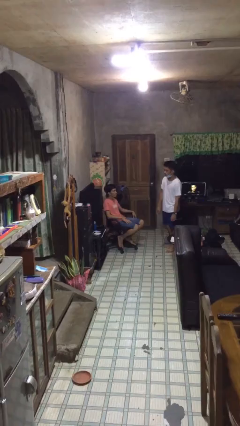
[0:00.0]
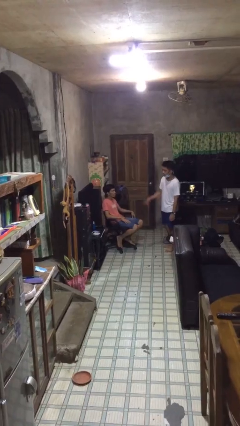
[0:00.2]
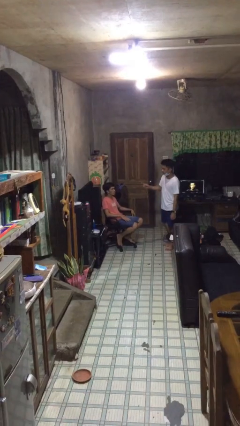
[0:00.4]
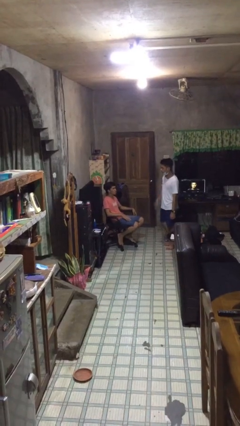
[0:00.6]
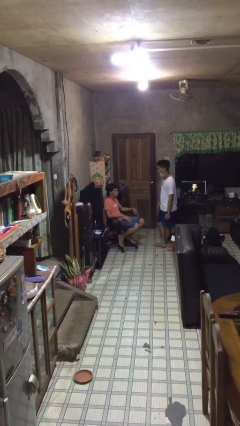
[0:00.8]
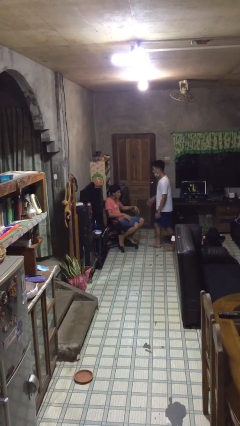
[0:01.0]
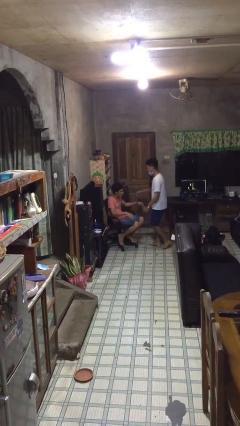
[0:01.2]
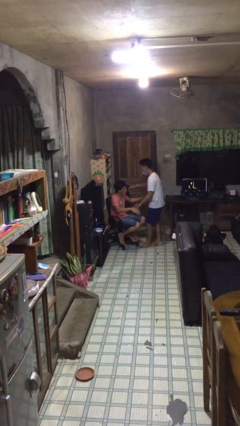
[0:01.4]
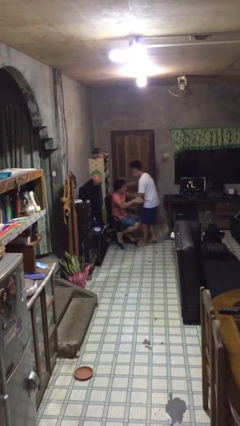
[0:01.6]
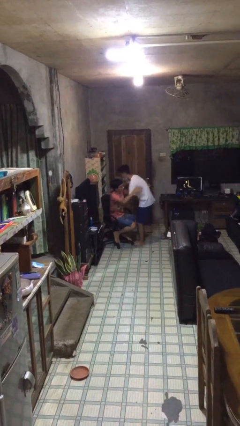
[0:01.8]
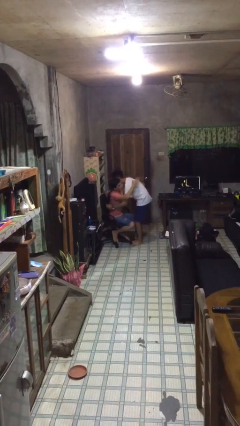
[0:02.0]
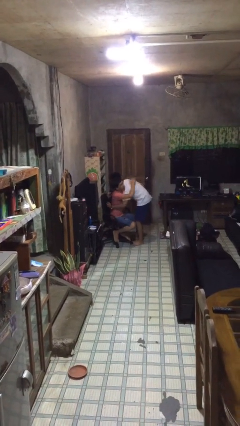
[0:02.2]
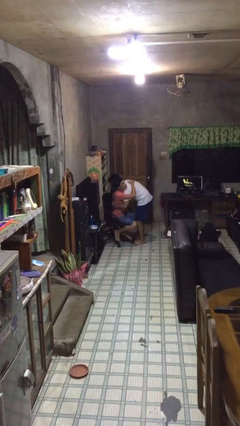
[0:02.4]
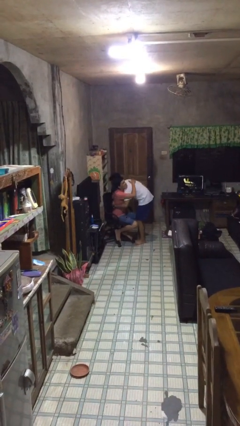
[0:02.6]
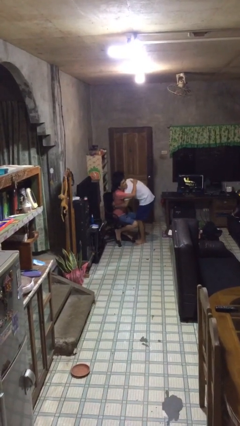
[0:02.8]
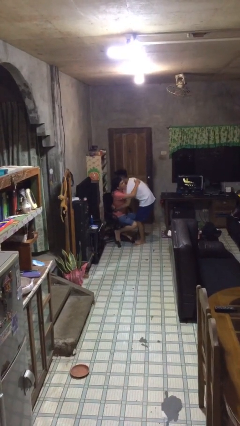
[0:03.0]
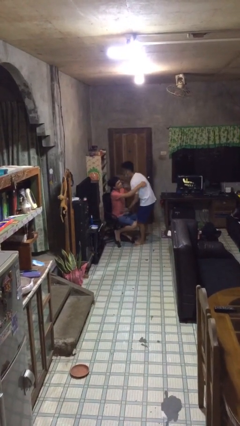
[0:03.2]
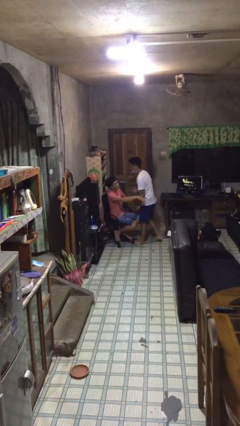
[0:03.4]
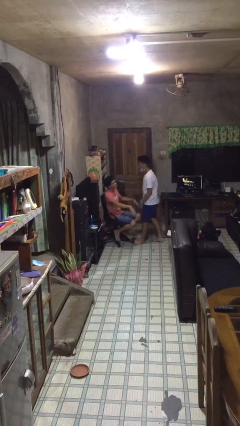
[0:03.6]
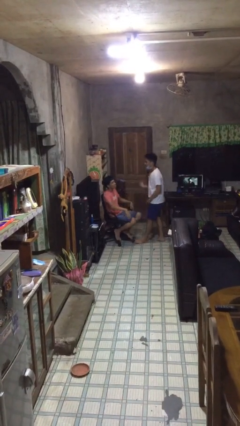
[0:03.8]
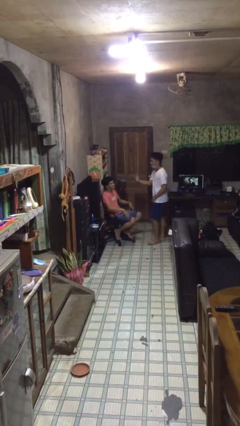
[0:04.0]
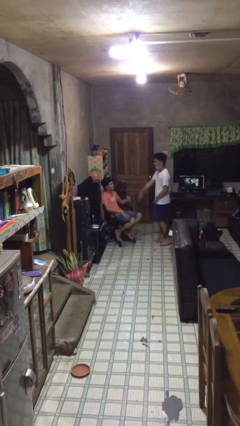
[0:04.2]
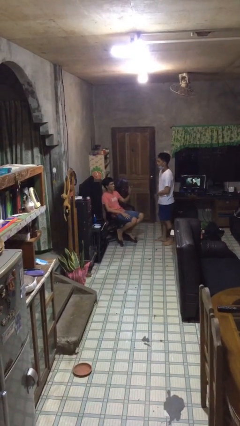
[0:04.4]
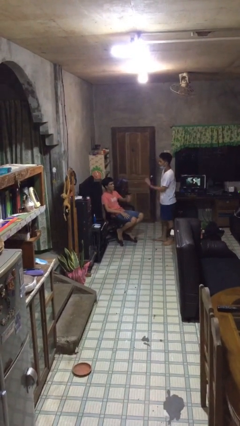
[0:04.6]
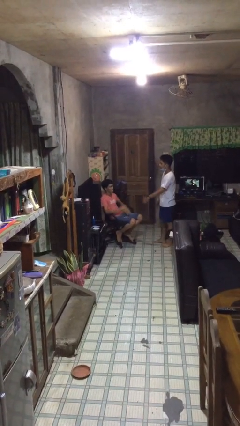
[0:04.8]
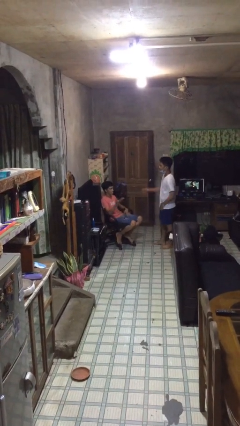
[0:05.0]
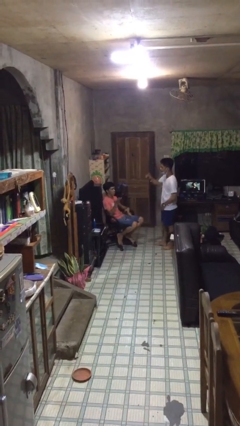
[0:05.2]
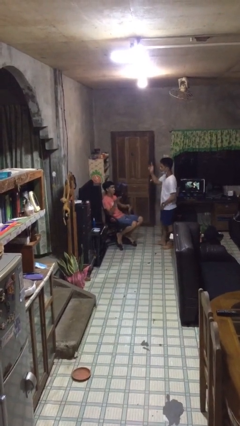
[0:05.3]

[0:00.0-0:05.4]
person embraces person

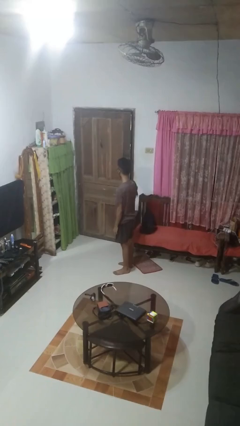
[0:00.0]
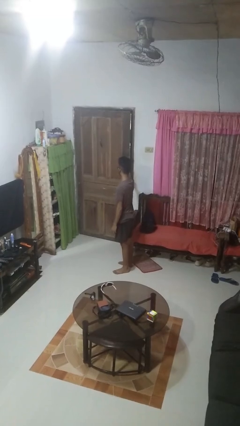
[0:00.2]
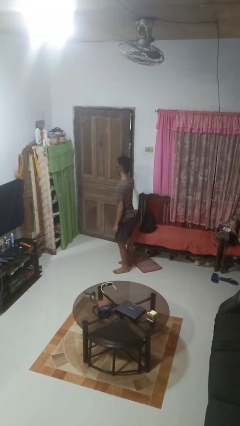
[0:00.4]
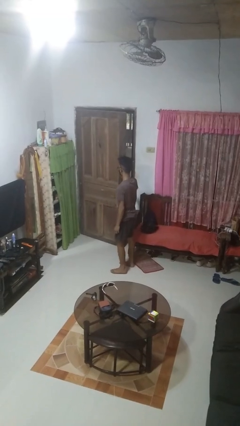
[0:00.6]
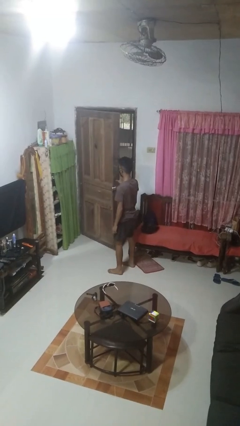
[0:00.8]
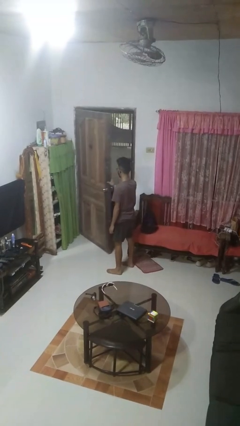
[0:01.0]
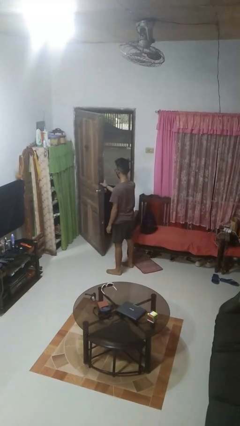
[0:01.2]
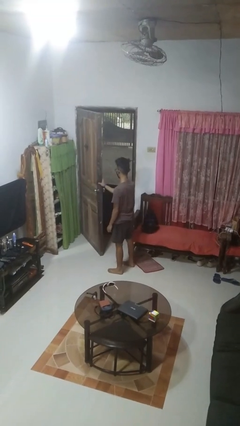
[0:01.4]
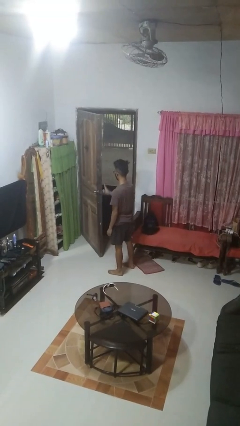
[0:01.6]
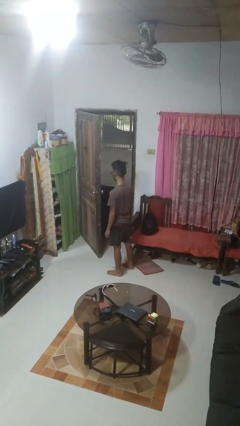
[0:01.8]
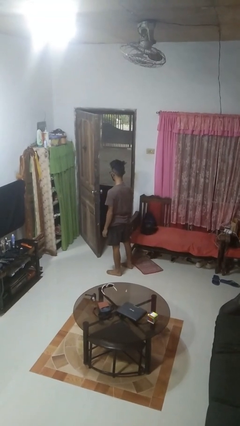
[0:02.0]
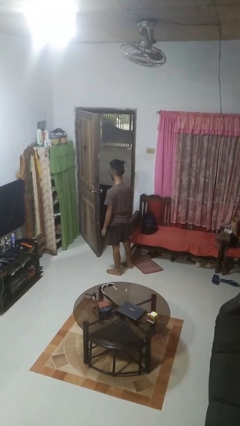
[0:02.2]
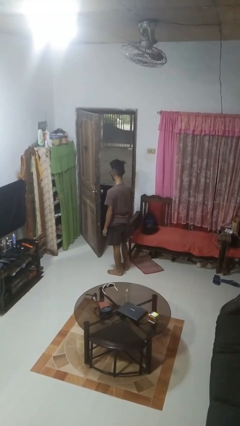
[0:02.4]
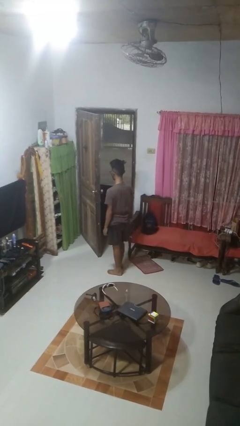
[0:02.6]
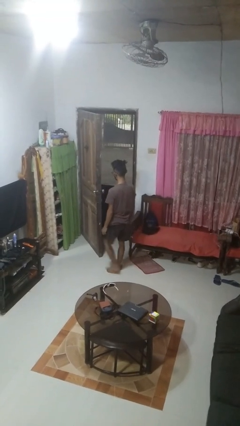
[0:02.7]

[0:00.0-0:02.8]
person opens facility door

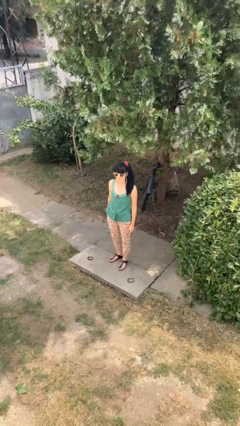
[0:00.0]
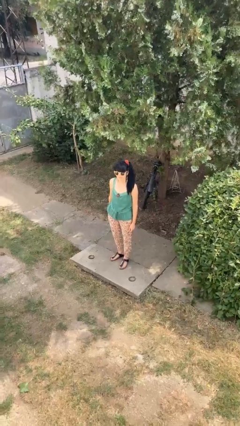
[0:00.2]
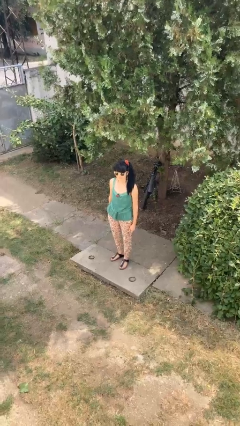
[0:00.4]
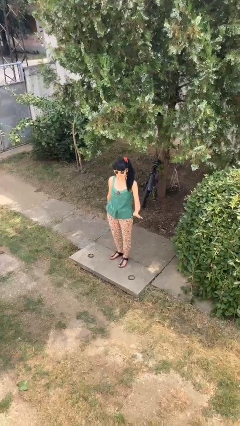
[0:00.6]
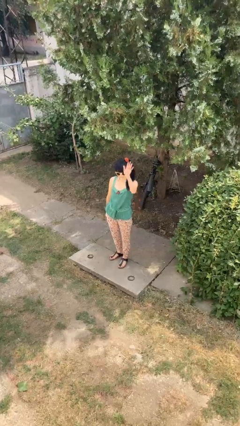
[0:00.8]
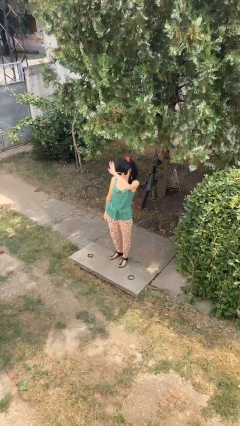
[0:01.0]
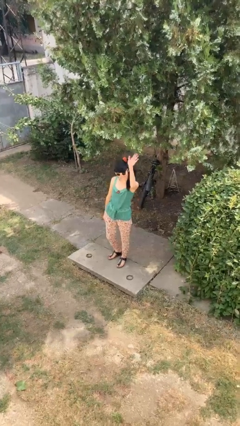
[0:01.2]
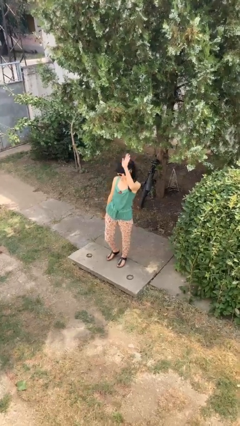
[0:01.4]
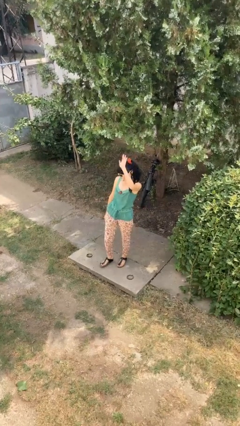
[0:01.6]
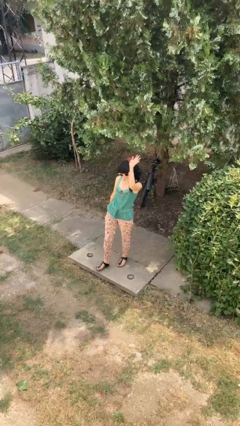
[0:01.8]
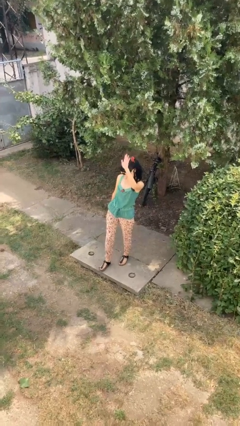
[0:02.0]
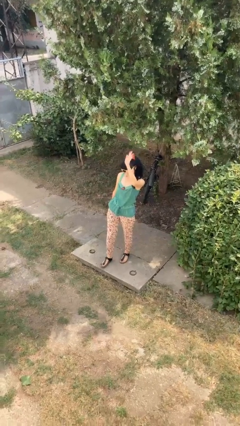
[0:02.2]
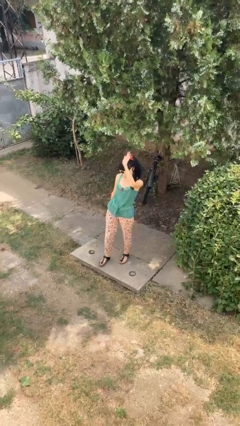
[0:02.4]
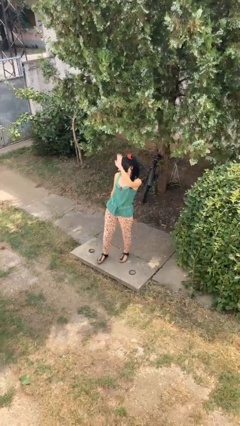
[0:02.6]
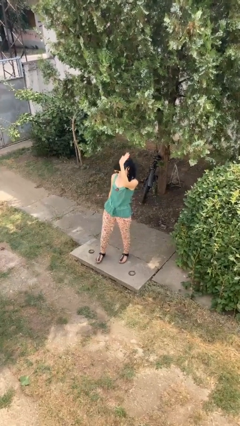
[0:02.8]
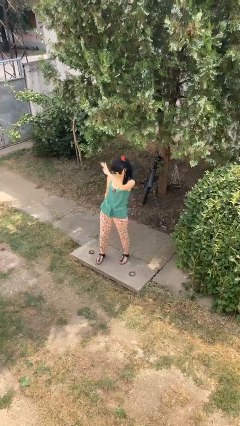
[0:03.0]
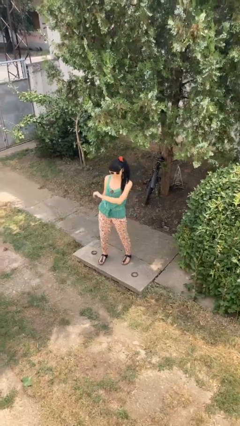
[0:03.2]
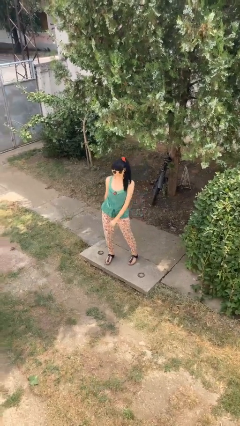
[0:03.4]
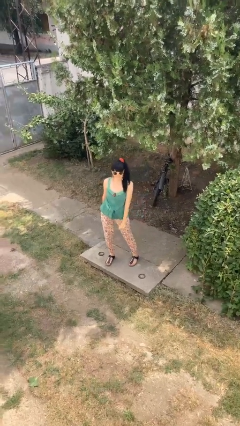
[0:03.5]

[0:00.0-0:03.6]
person waves at person

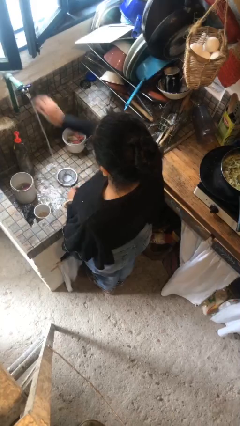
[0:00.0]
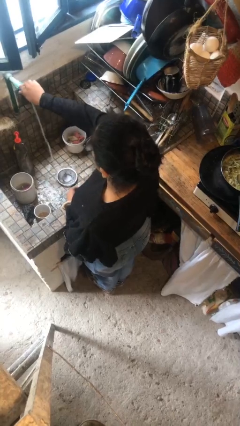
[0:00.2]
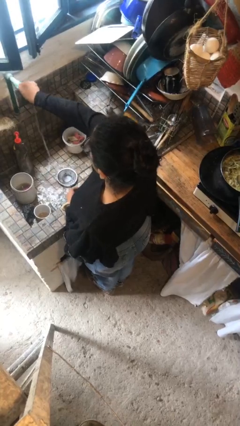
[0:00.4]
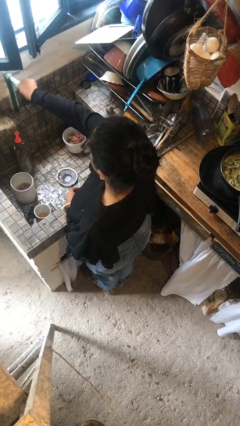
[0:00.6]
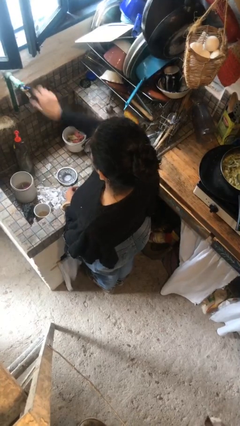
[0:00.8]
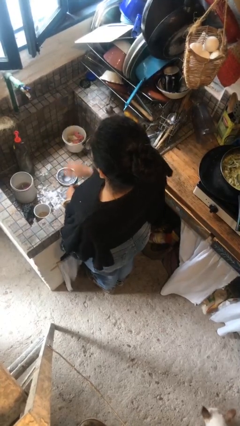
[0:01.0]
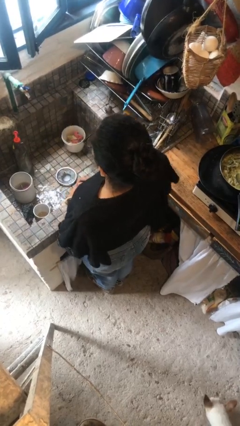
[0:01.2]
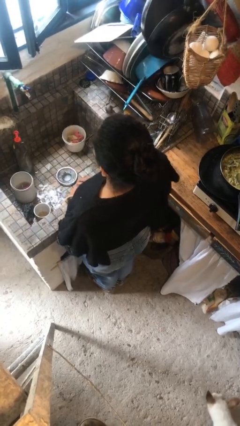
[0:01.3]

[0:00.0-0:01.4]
person turns off faucet

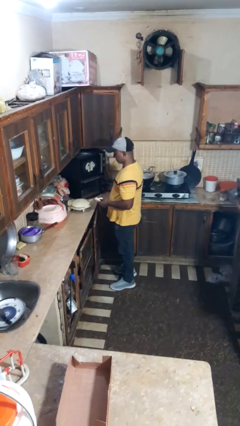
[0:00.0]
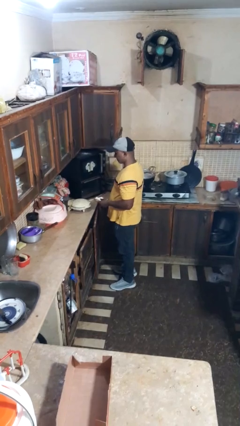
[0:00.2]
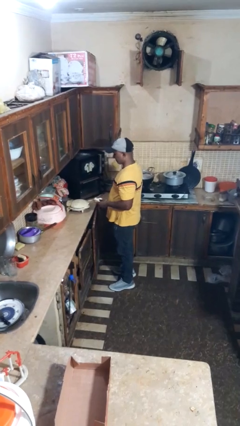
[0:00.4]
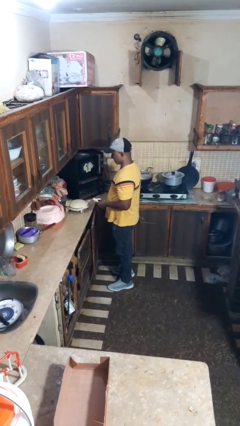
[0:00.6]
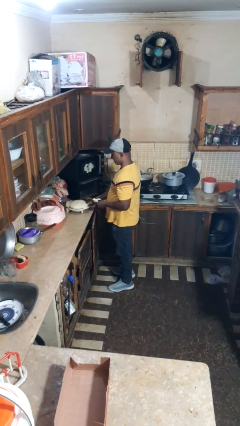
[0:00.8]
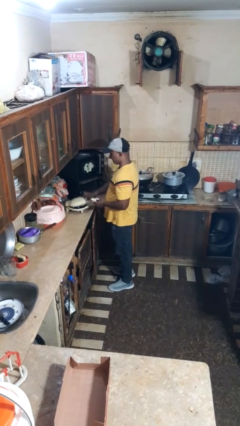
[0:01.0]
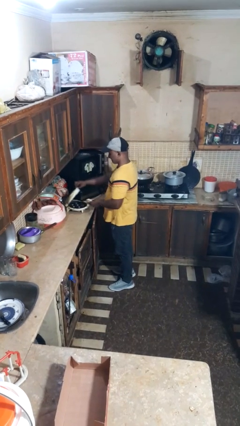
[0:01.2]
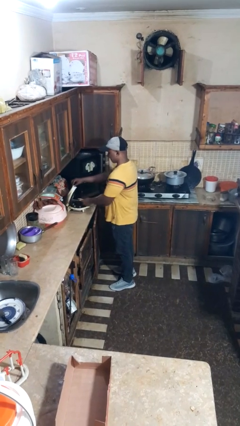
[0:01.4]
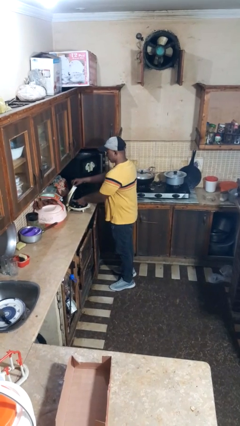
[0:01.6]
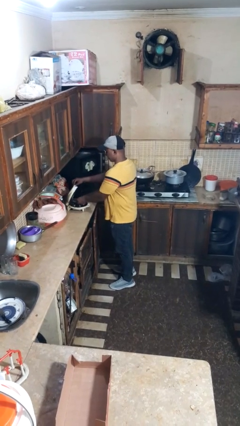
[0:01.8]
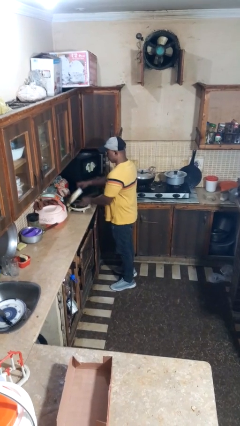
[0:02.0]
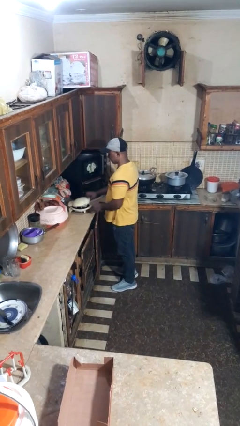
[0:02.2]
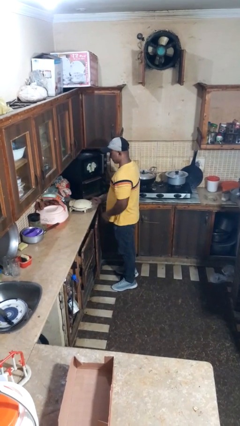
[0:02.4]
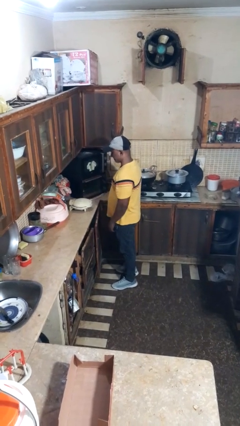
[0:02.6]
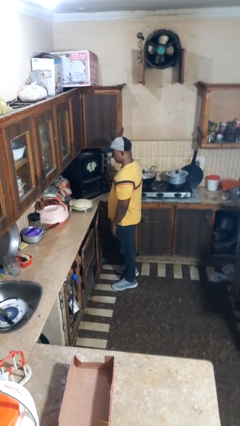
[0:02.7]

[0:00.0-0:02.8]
person puts object into toaster

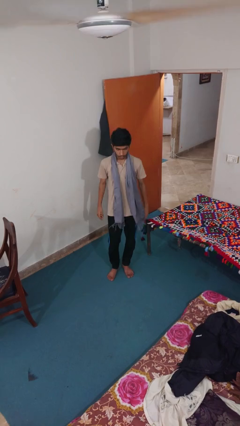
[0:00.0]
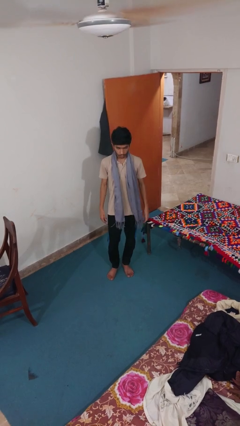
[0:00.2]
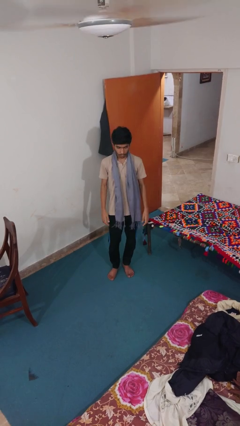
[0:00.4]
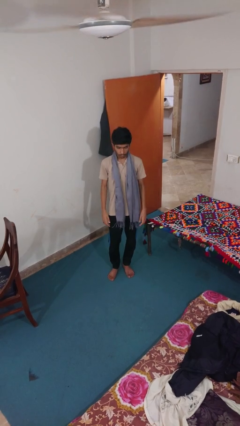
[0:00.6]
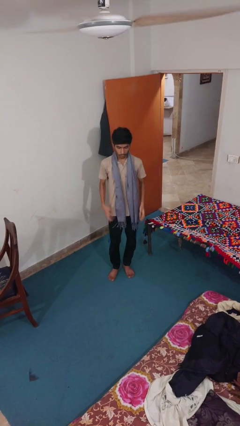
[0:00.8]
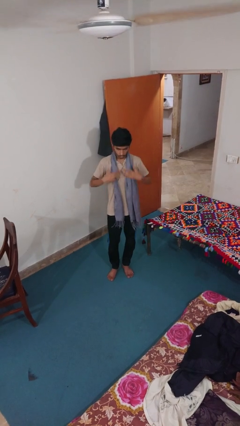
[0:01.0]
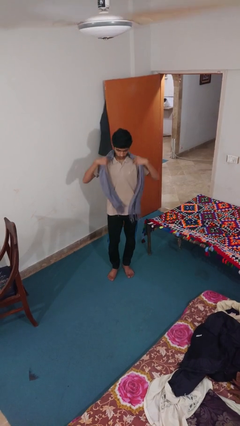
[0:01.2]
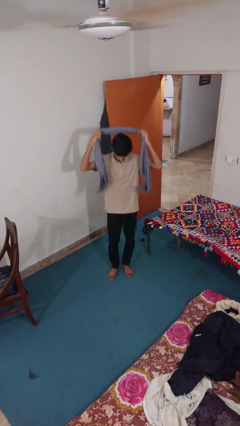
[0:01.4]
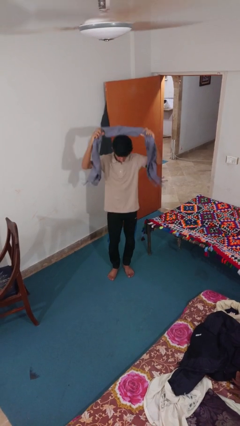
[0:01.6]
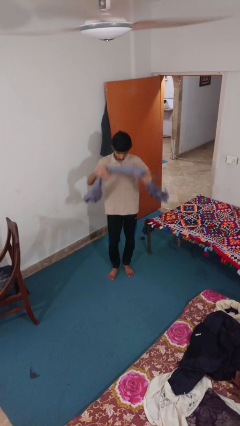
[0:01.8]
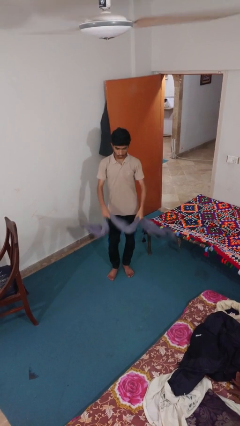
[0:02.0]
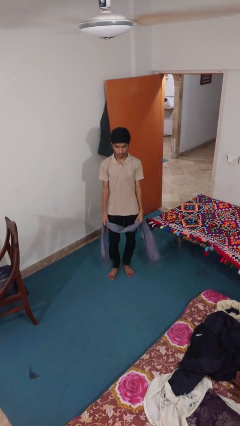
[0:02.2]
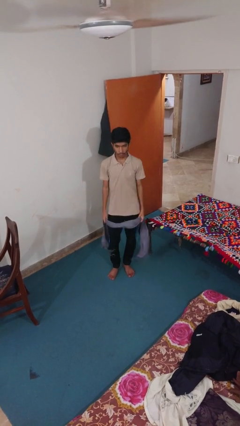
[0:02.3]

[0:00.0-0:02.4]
person takes off scarf
